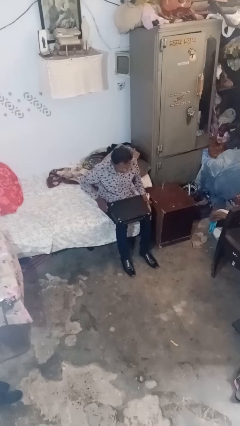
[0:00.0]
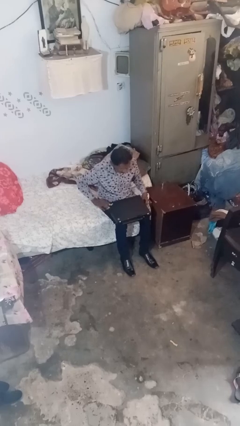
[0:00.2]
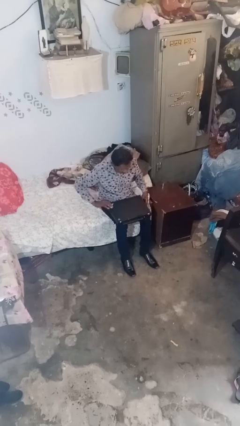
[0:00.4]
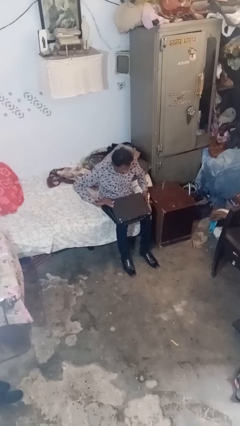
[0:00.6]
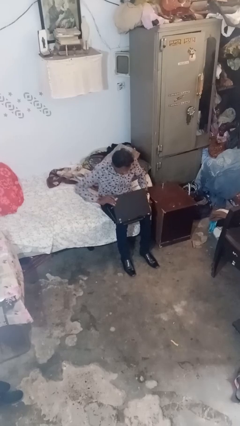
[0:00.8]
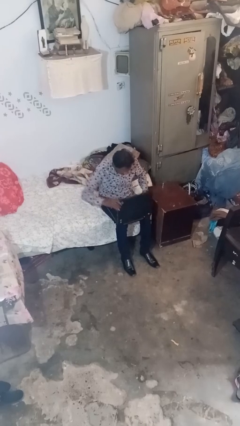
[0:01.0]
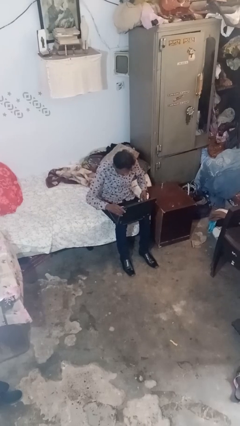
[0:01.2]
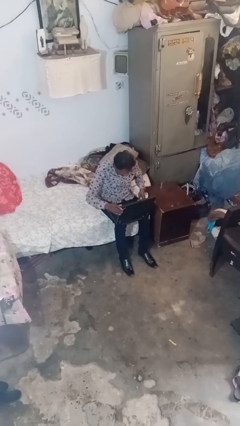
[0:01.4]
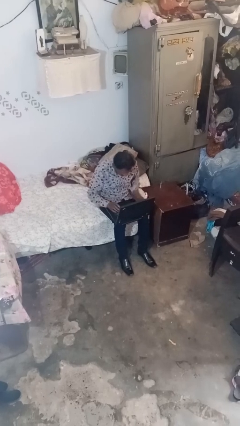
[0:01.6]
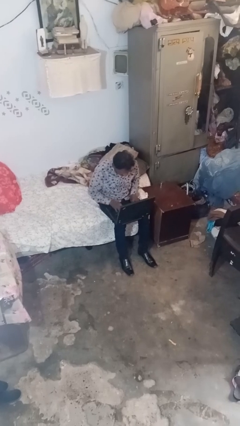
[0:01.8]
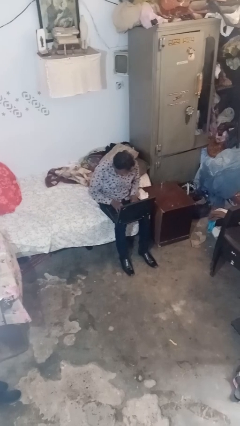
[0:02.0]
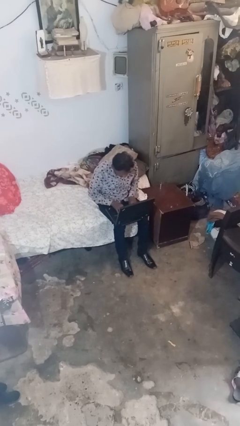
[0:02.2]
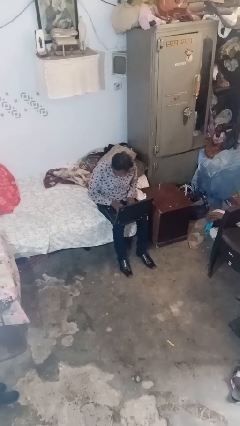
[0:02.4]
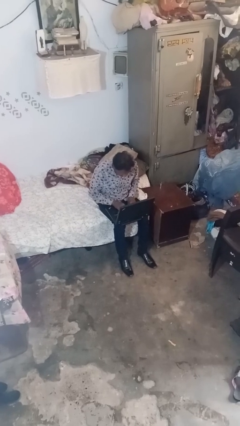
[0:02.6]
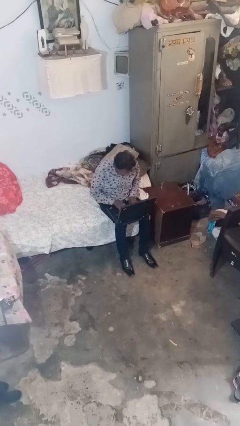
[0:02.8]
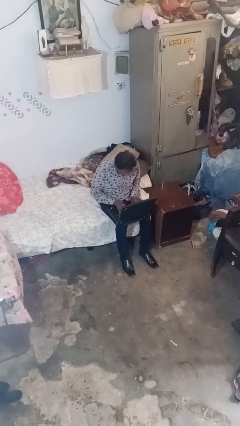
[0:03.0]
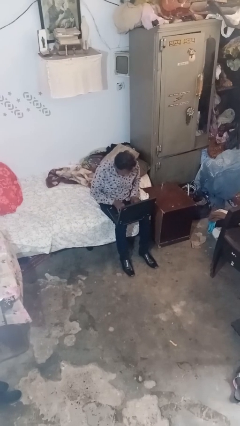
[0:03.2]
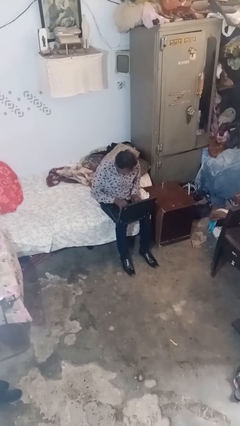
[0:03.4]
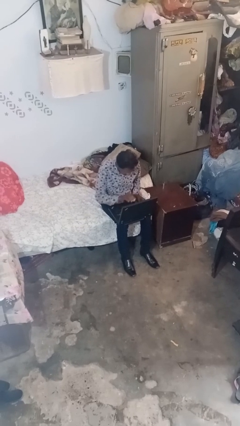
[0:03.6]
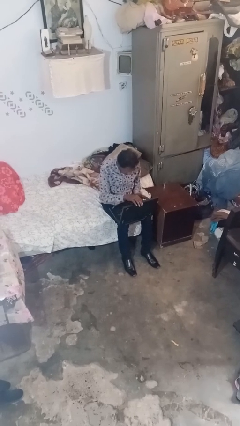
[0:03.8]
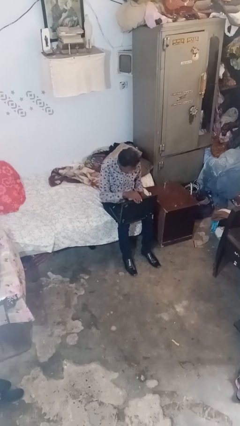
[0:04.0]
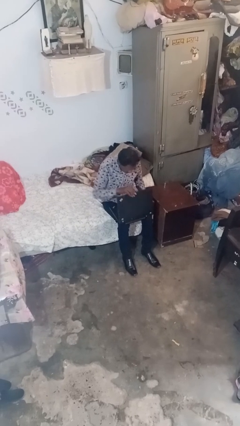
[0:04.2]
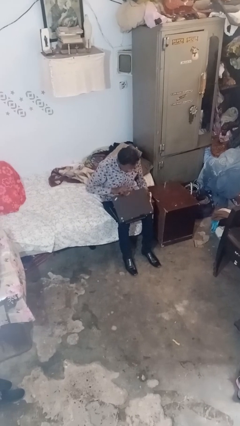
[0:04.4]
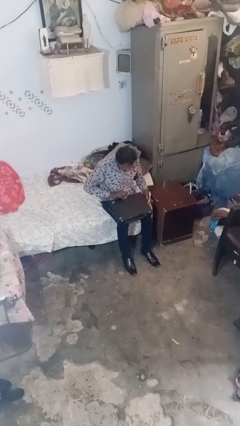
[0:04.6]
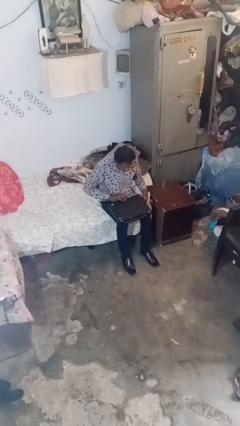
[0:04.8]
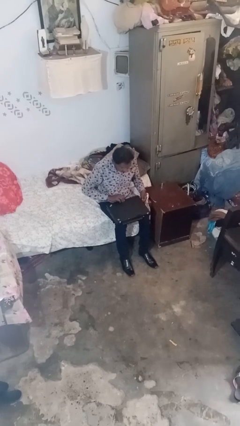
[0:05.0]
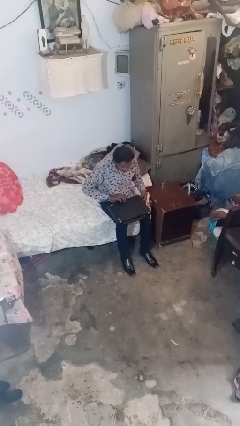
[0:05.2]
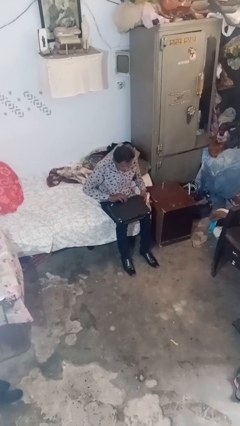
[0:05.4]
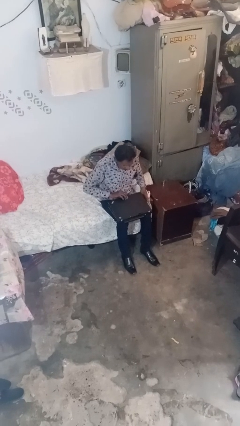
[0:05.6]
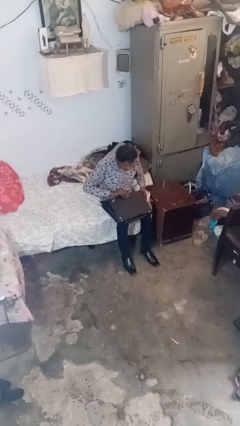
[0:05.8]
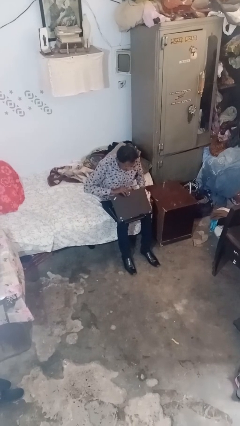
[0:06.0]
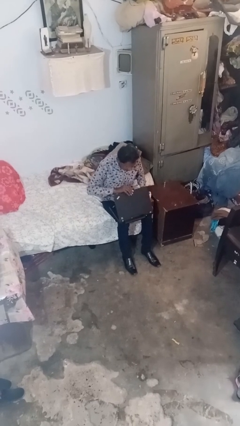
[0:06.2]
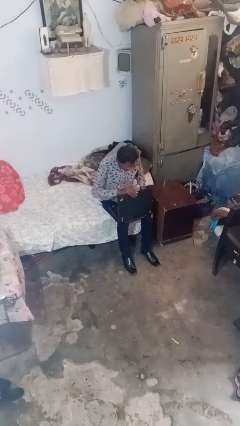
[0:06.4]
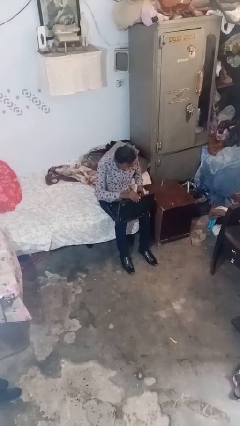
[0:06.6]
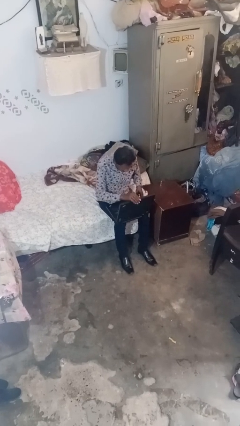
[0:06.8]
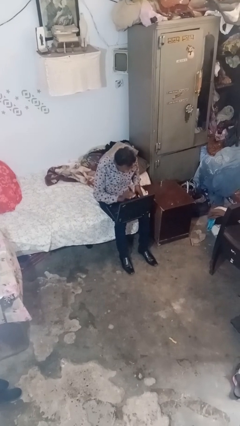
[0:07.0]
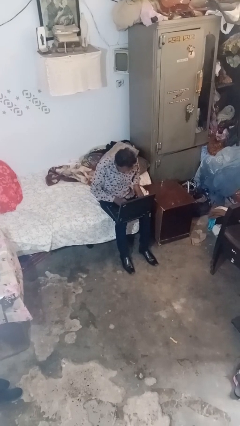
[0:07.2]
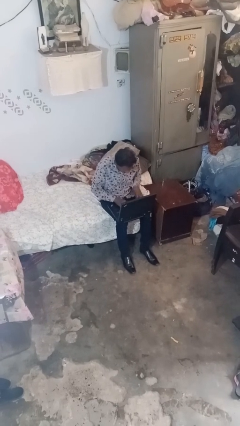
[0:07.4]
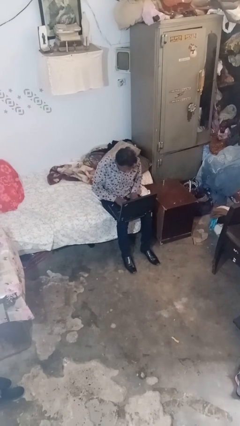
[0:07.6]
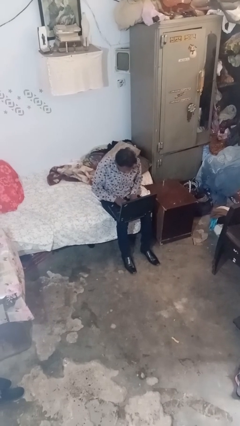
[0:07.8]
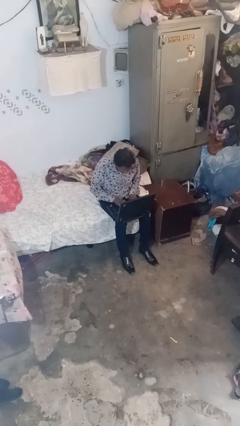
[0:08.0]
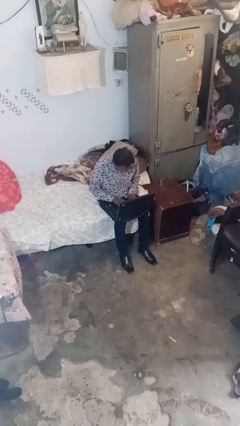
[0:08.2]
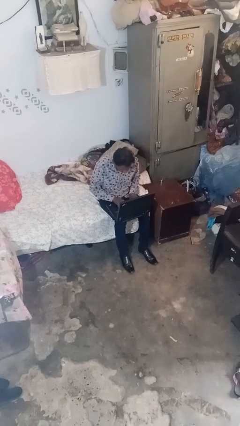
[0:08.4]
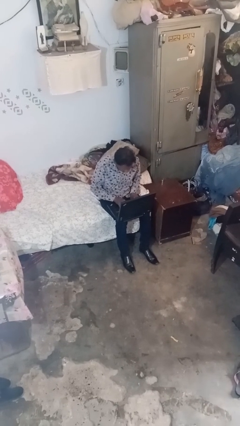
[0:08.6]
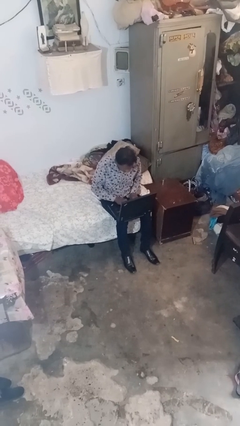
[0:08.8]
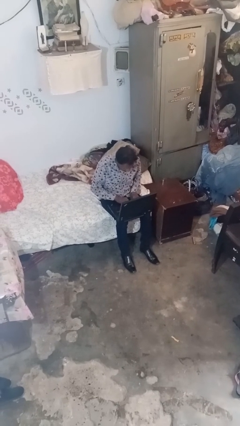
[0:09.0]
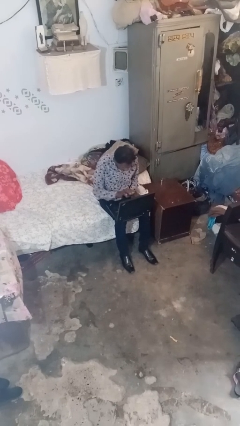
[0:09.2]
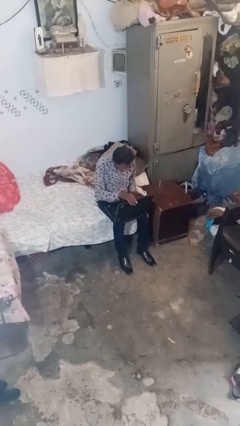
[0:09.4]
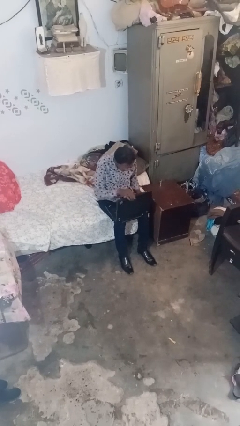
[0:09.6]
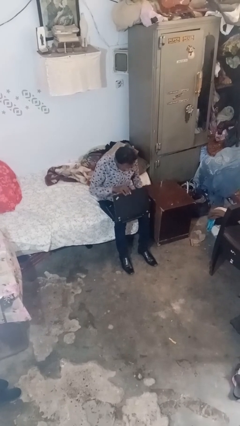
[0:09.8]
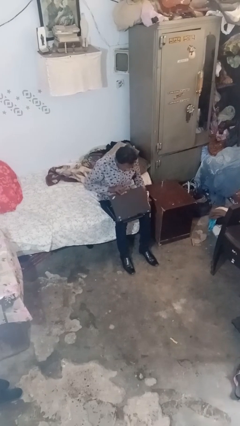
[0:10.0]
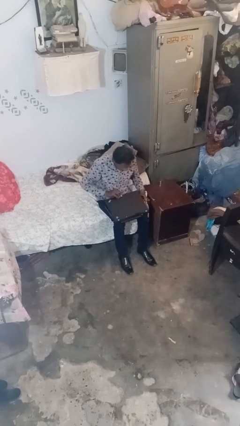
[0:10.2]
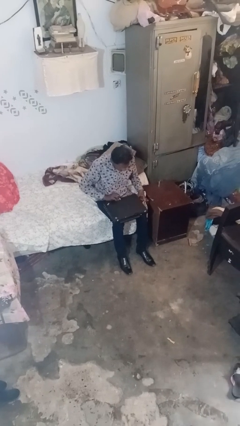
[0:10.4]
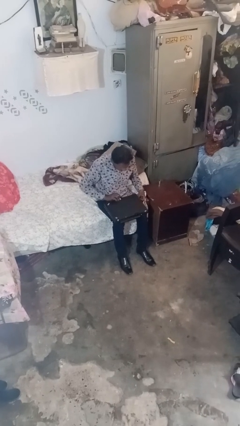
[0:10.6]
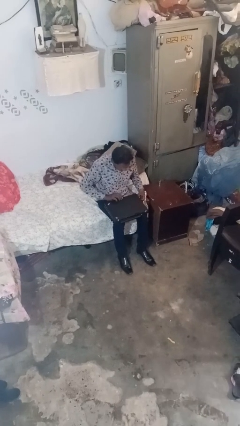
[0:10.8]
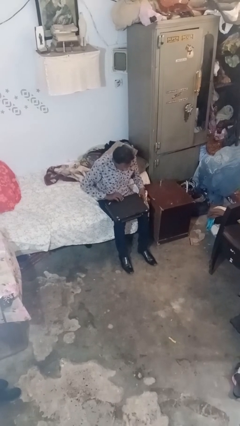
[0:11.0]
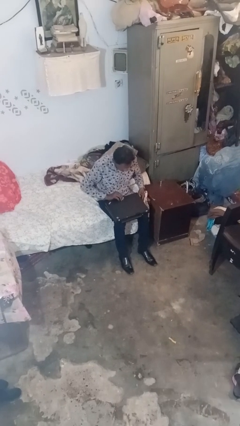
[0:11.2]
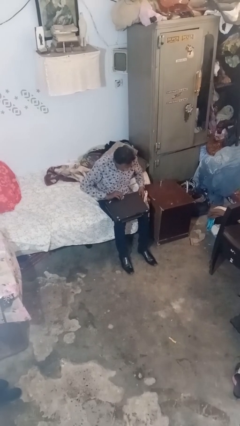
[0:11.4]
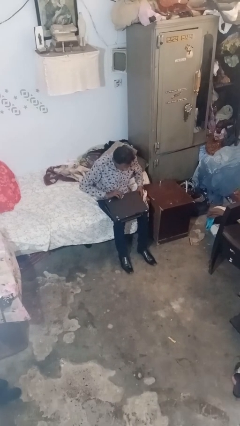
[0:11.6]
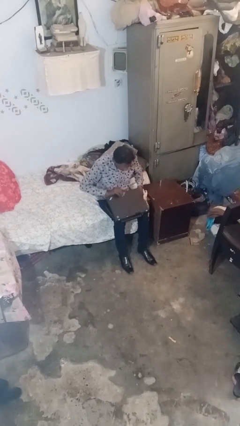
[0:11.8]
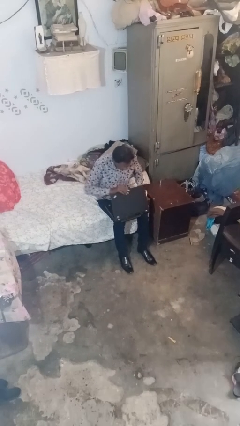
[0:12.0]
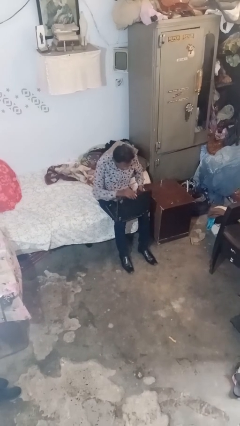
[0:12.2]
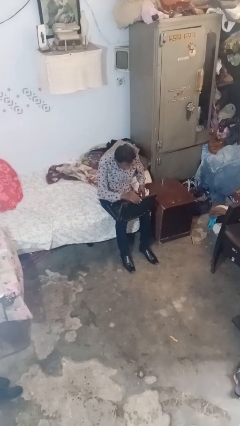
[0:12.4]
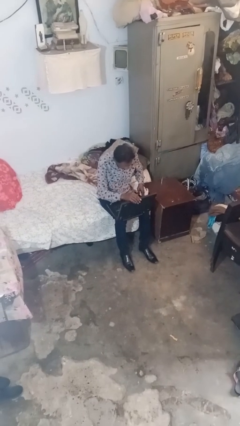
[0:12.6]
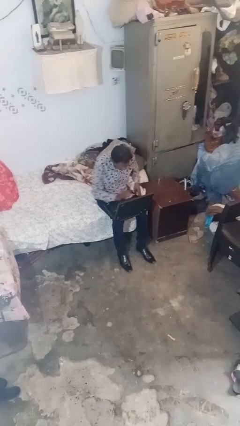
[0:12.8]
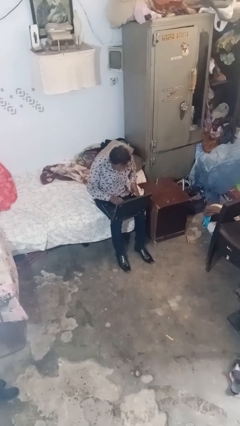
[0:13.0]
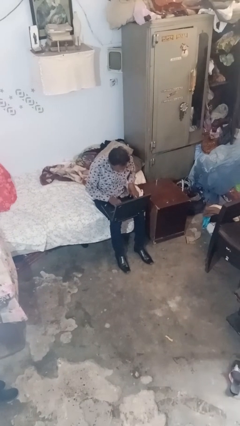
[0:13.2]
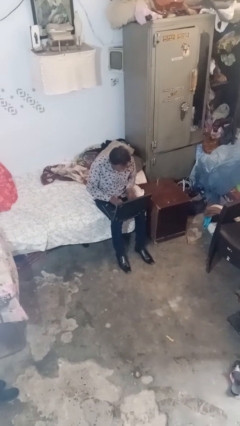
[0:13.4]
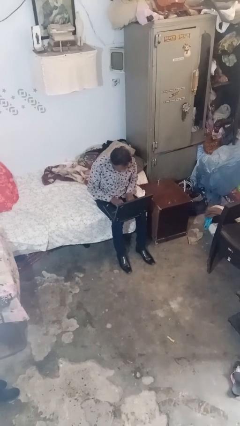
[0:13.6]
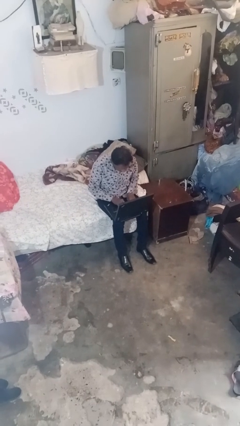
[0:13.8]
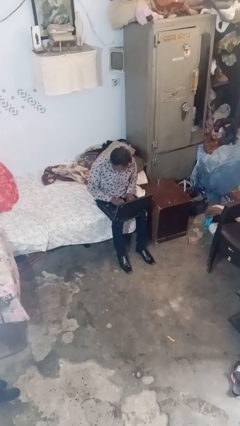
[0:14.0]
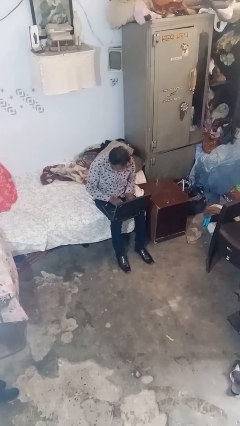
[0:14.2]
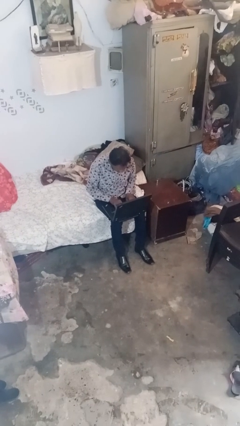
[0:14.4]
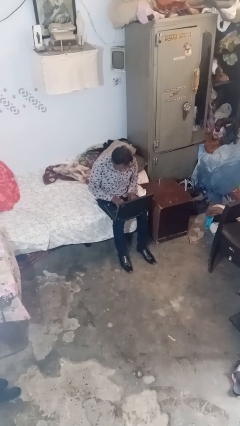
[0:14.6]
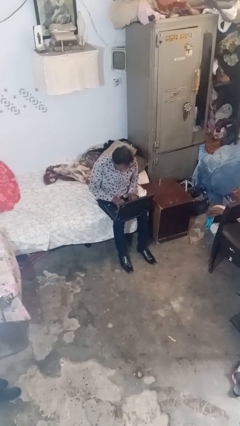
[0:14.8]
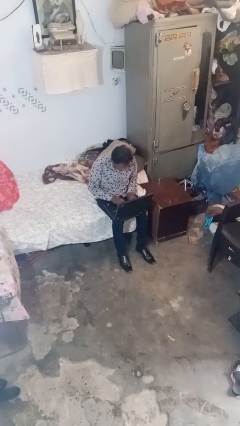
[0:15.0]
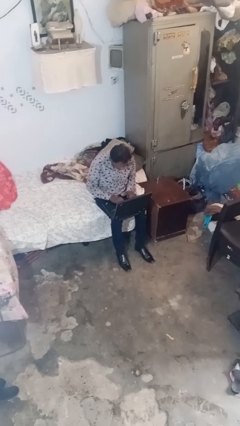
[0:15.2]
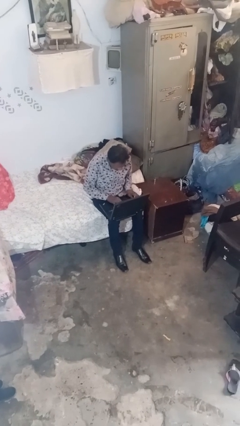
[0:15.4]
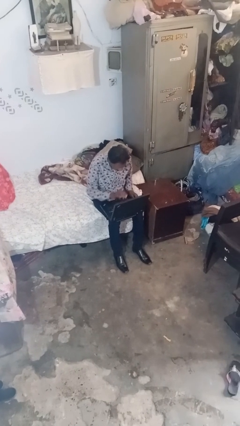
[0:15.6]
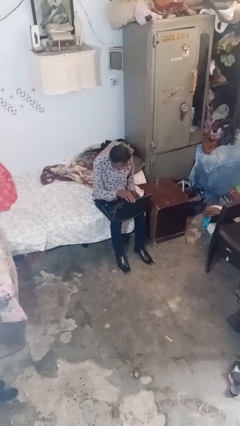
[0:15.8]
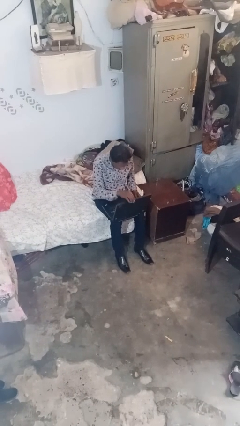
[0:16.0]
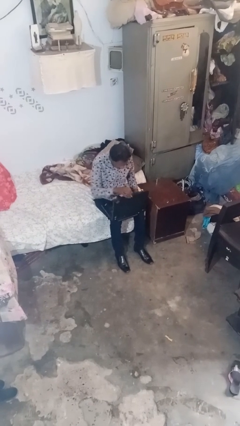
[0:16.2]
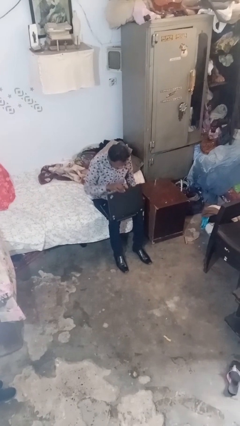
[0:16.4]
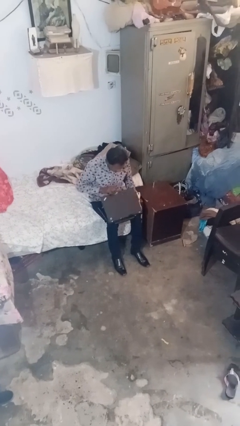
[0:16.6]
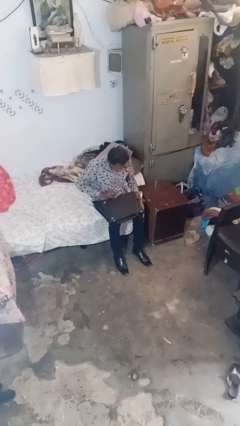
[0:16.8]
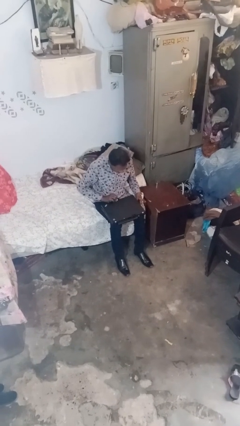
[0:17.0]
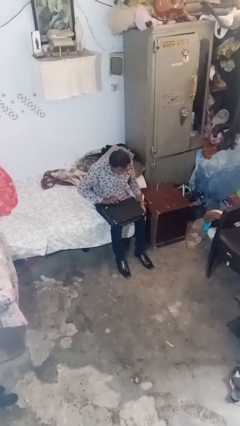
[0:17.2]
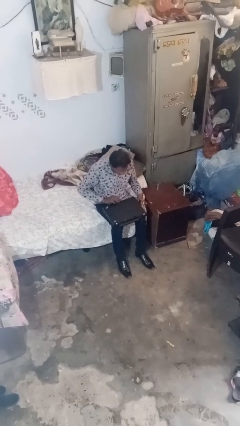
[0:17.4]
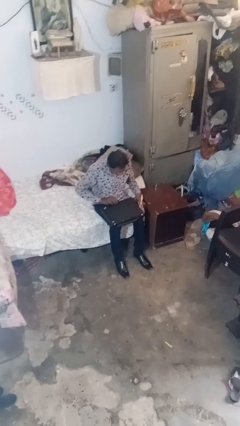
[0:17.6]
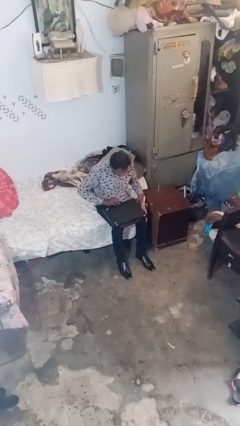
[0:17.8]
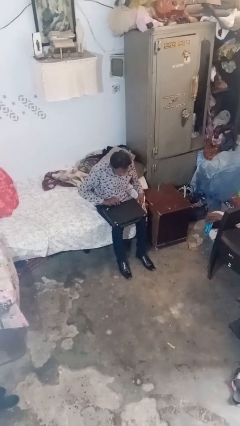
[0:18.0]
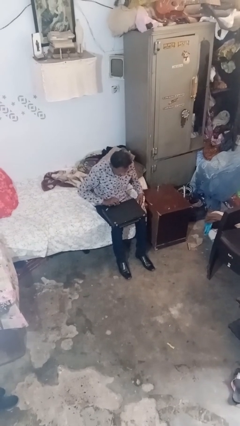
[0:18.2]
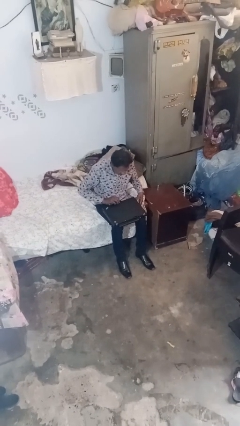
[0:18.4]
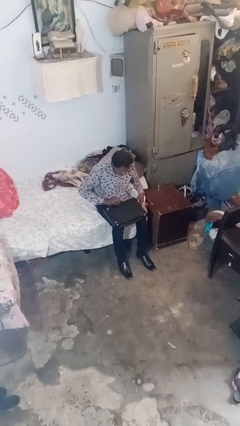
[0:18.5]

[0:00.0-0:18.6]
person interacts with laptop
